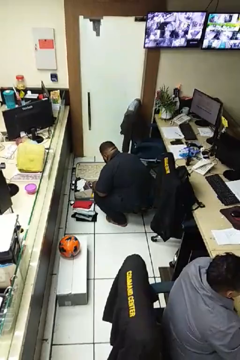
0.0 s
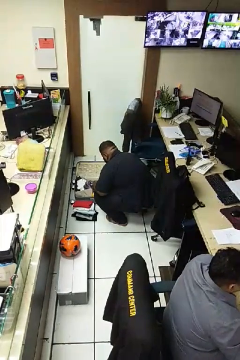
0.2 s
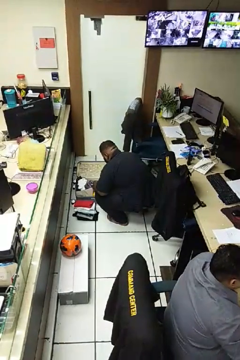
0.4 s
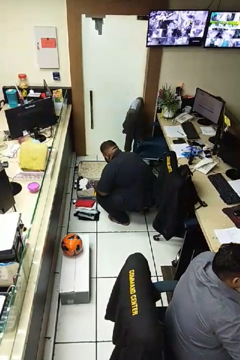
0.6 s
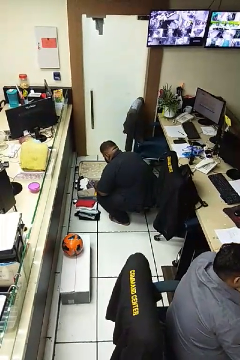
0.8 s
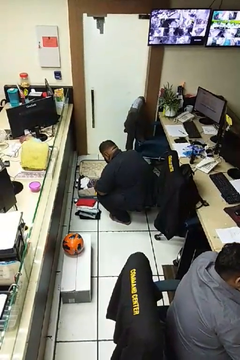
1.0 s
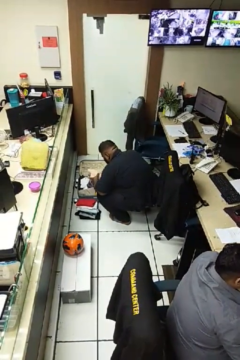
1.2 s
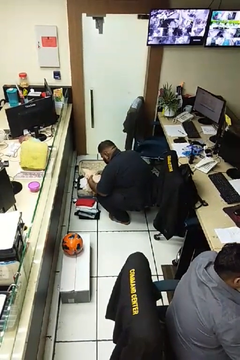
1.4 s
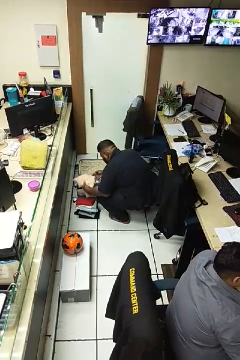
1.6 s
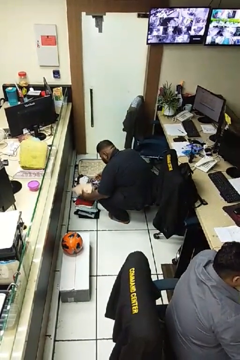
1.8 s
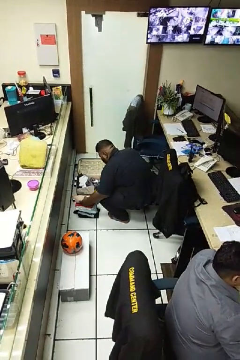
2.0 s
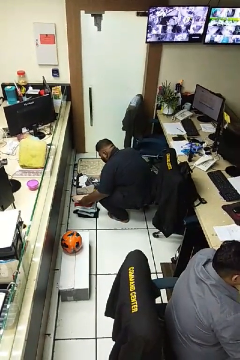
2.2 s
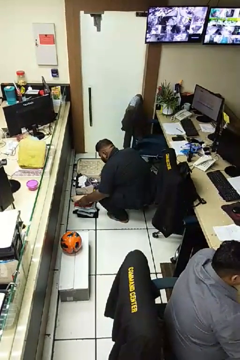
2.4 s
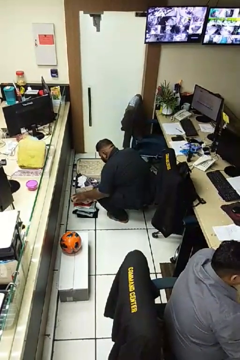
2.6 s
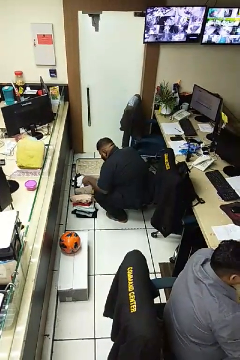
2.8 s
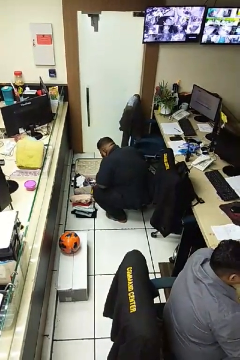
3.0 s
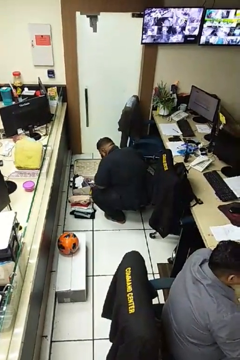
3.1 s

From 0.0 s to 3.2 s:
person unloads clothes from suitcase

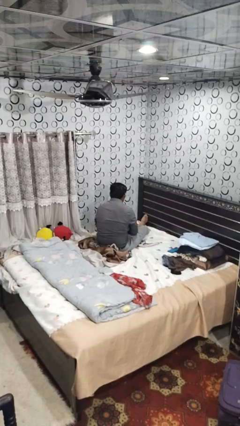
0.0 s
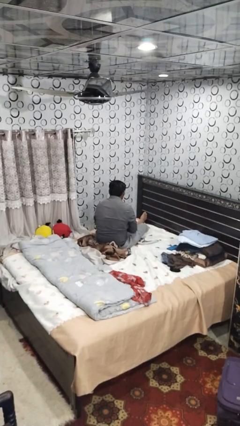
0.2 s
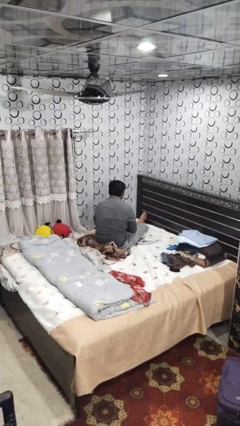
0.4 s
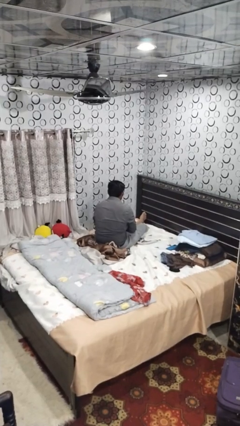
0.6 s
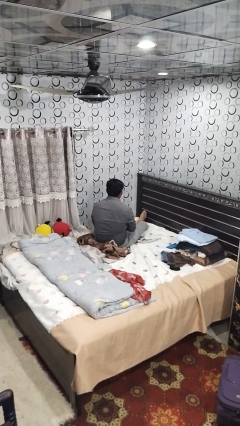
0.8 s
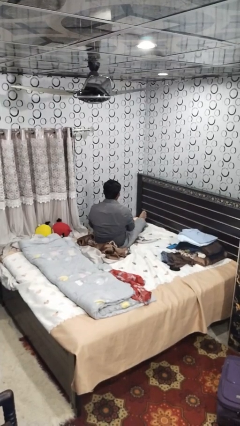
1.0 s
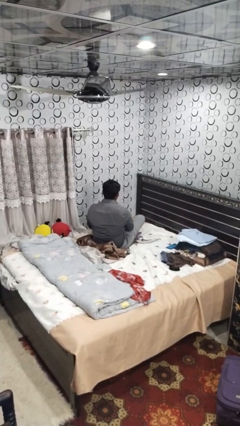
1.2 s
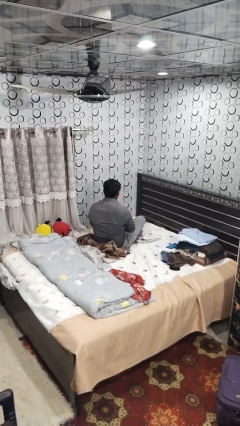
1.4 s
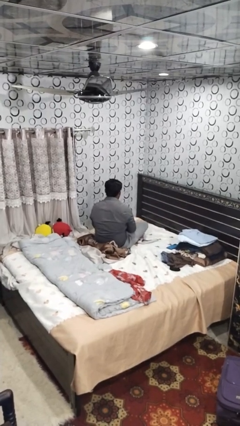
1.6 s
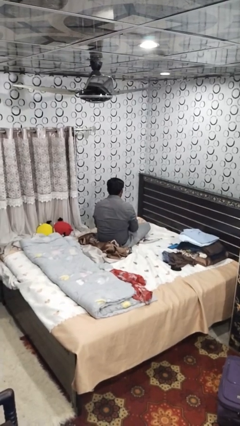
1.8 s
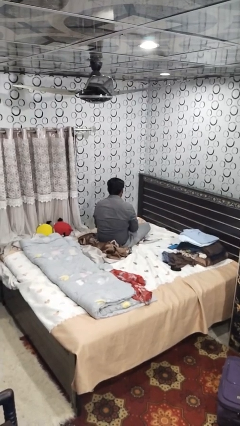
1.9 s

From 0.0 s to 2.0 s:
person crosses legs

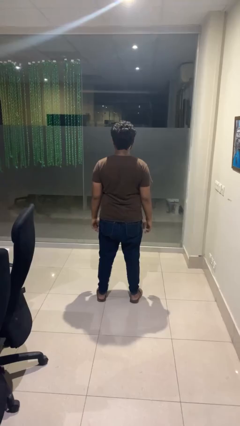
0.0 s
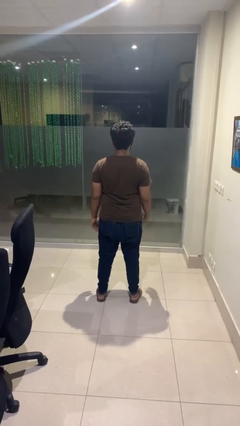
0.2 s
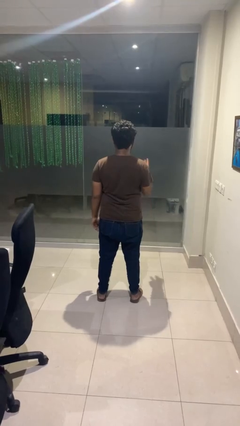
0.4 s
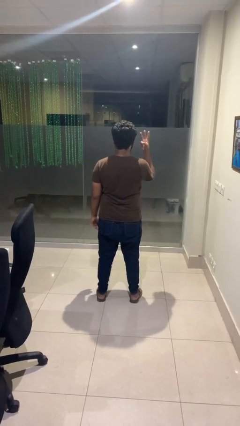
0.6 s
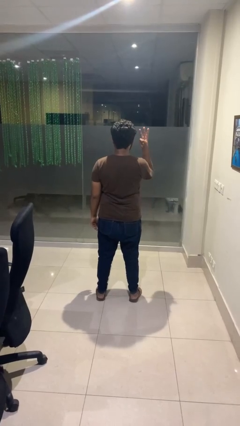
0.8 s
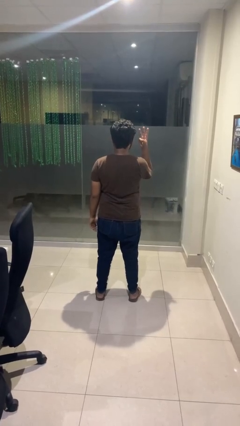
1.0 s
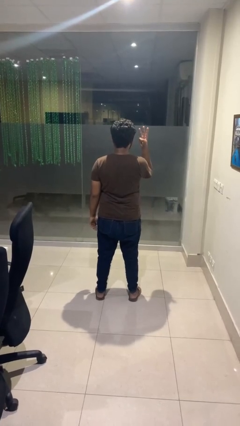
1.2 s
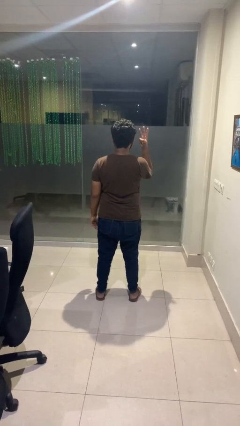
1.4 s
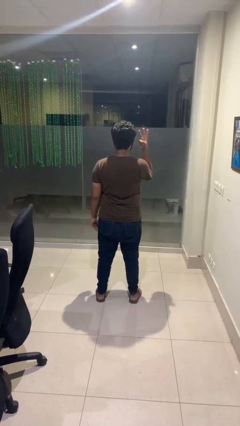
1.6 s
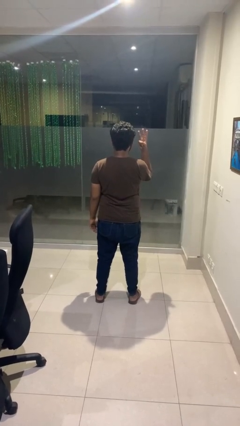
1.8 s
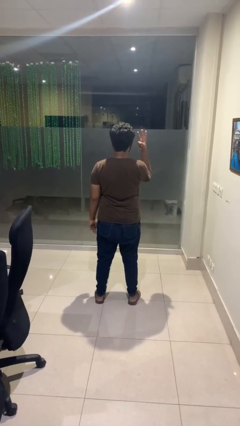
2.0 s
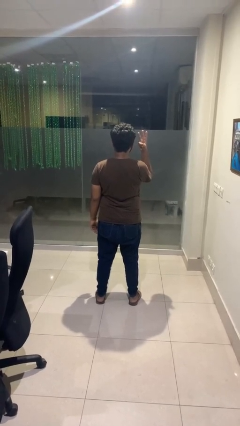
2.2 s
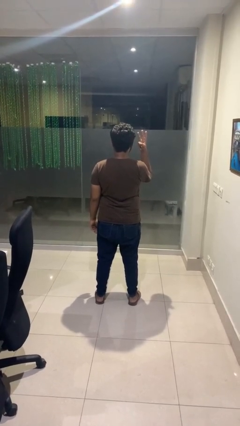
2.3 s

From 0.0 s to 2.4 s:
person gestures number three

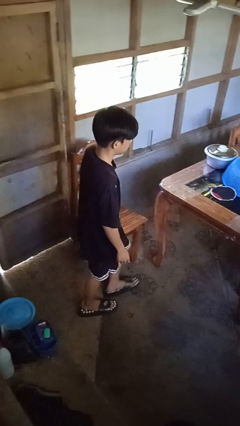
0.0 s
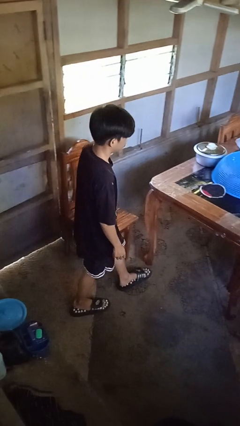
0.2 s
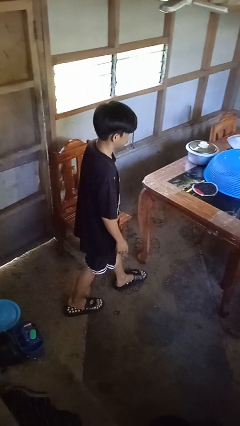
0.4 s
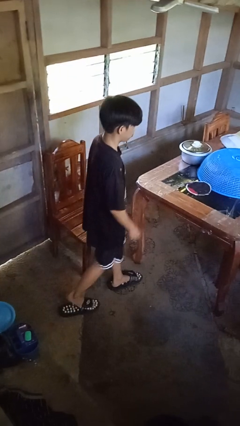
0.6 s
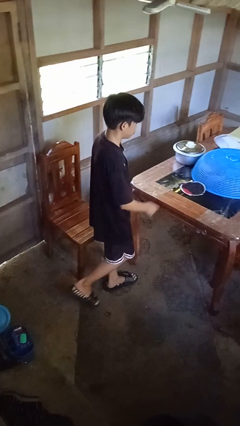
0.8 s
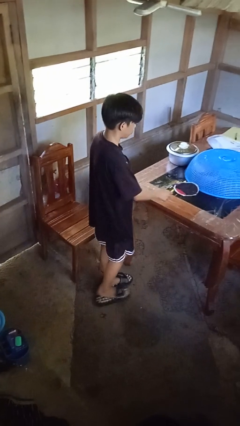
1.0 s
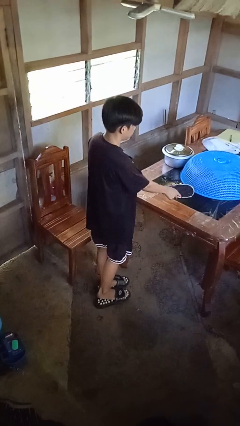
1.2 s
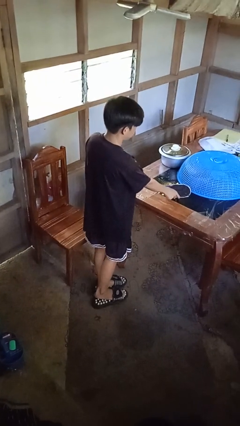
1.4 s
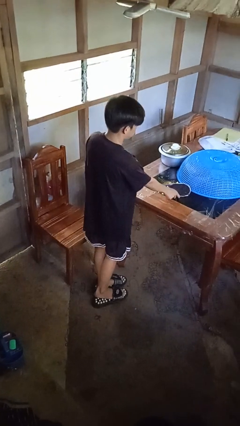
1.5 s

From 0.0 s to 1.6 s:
person picks up object from table

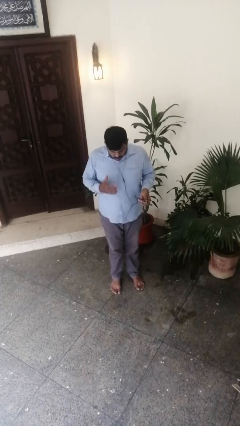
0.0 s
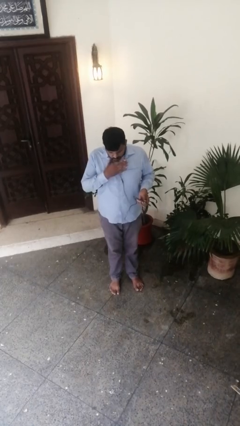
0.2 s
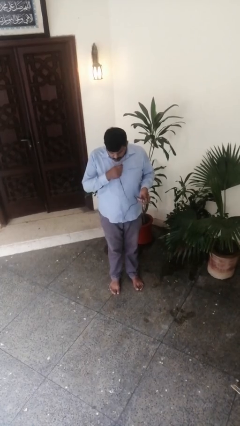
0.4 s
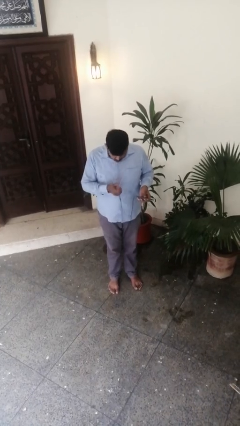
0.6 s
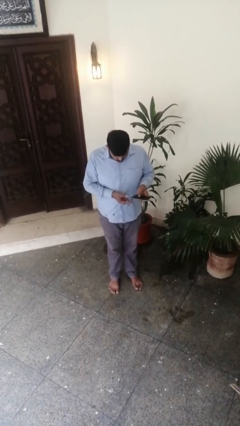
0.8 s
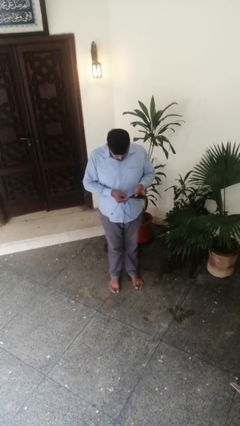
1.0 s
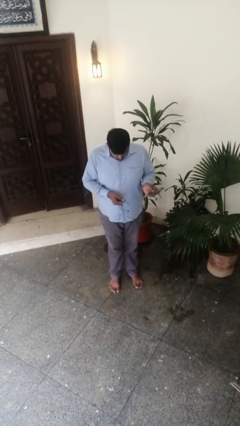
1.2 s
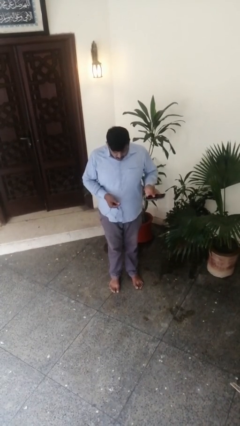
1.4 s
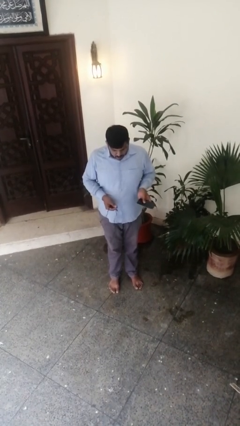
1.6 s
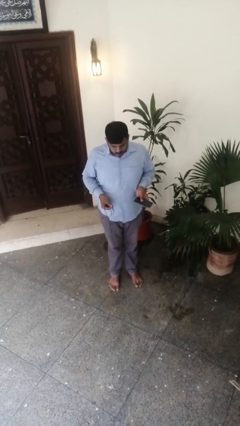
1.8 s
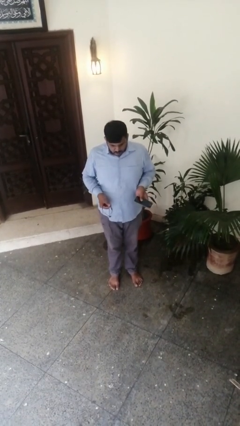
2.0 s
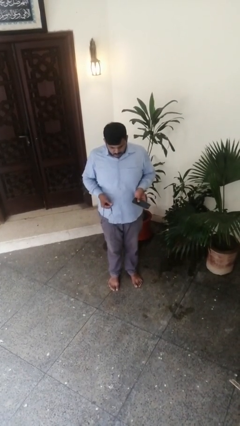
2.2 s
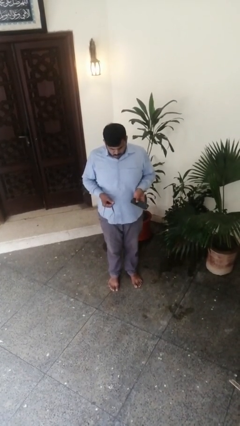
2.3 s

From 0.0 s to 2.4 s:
person takes off headphones

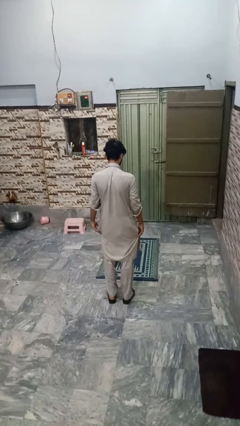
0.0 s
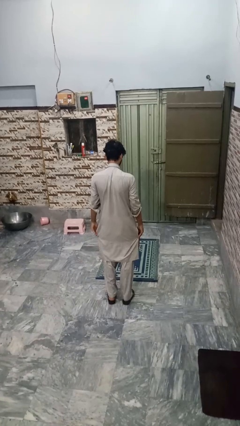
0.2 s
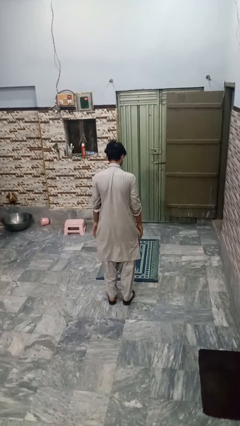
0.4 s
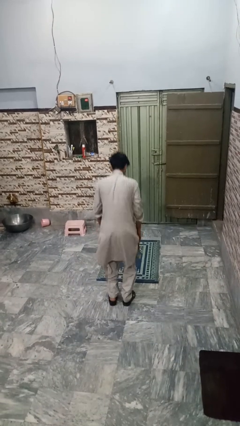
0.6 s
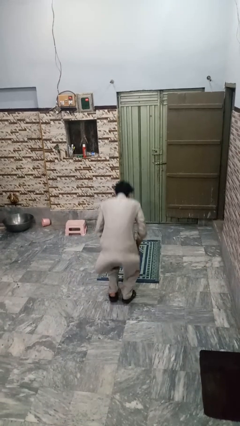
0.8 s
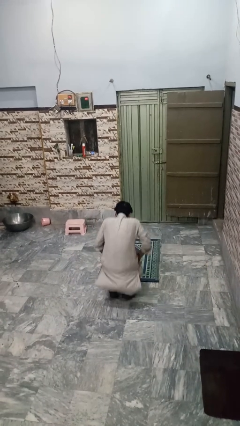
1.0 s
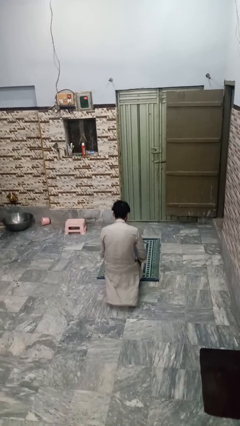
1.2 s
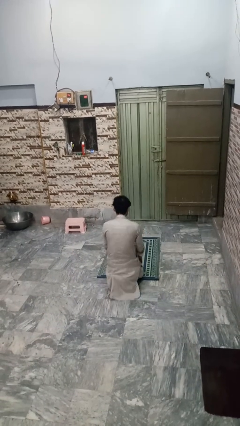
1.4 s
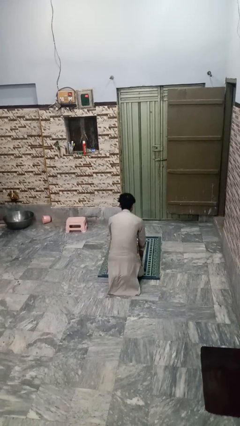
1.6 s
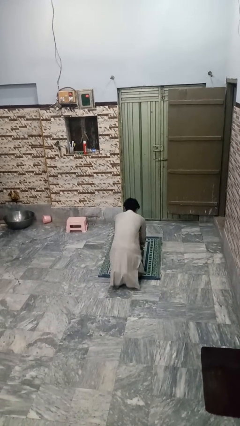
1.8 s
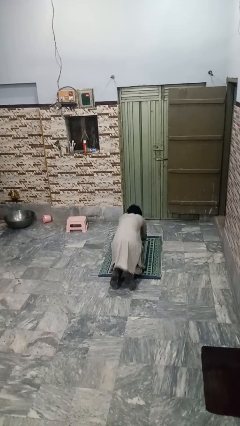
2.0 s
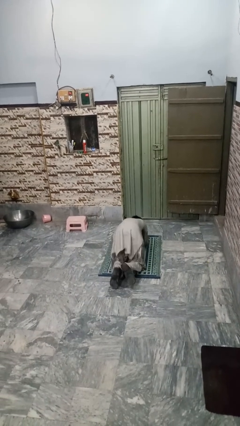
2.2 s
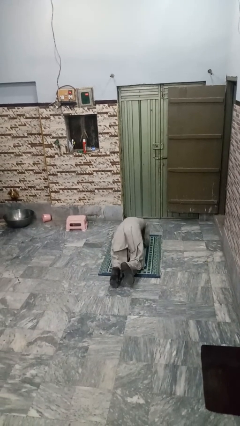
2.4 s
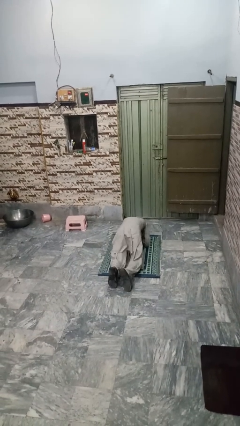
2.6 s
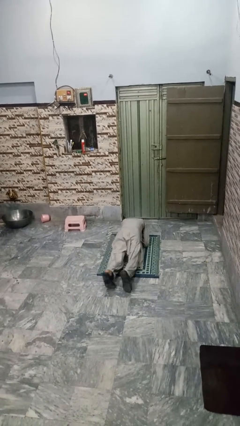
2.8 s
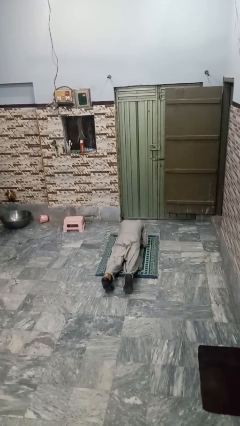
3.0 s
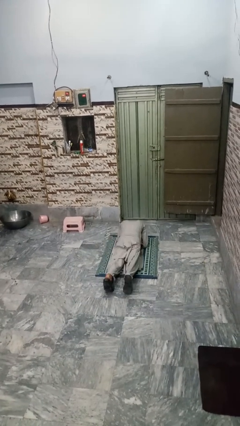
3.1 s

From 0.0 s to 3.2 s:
person exercises with plank

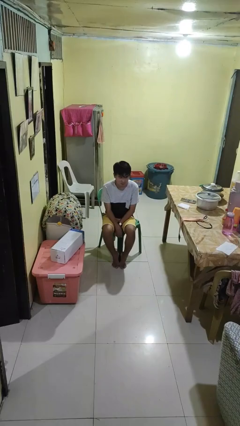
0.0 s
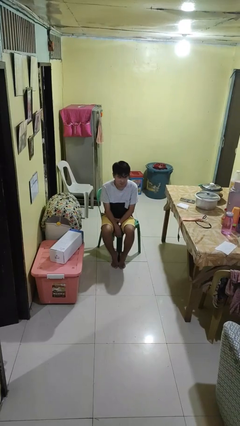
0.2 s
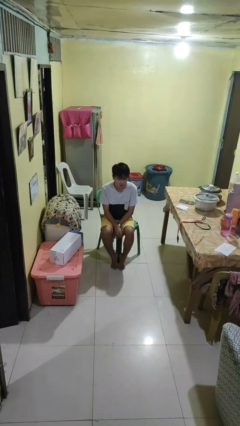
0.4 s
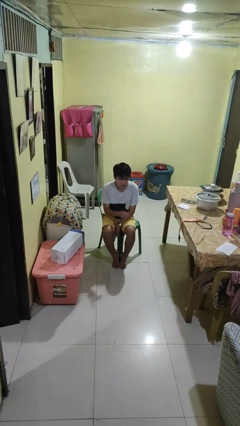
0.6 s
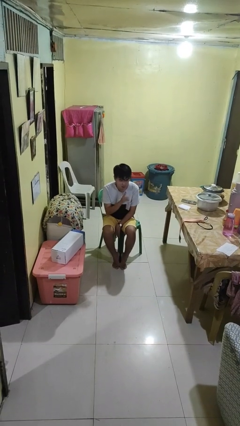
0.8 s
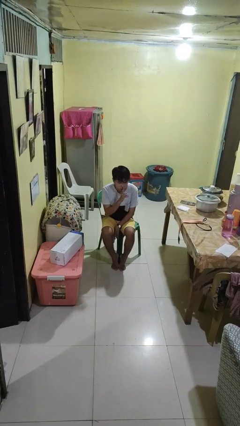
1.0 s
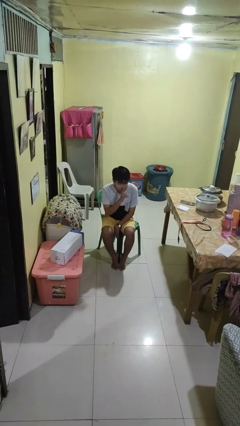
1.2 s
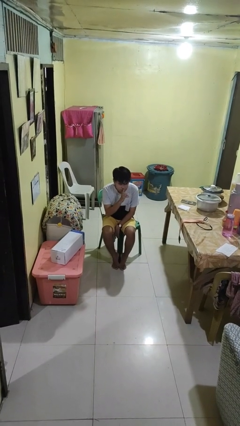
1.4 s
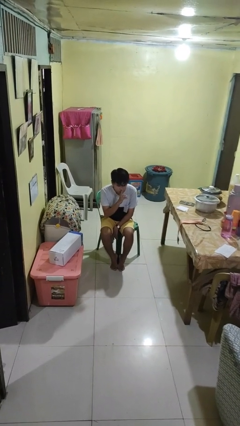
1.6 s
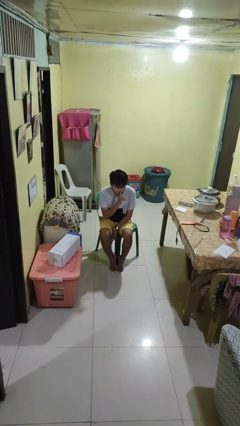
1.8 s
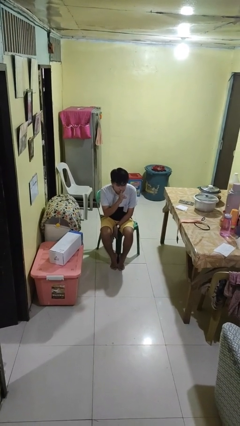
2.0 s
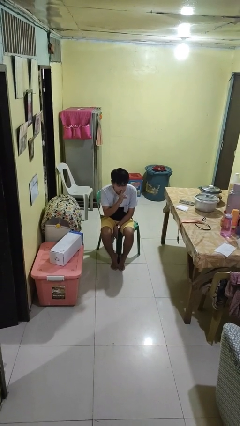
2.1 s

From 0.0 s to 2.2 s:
person gestures be quiet

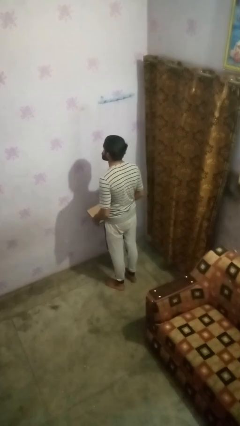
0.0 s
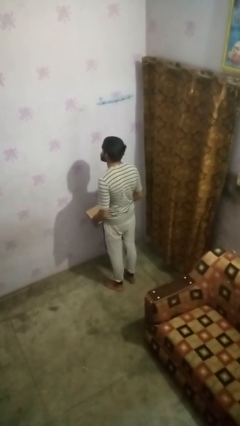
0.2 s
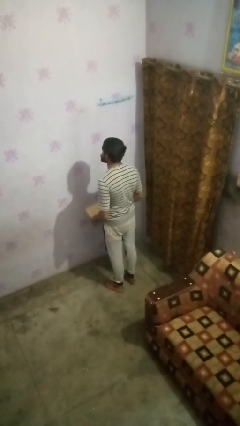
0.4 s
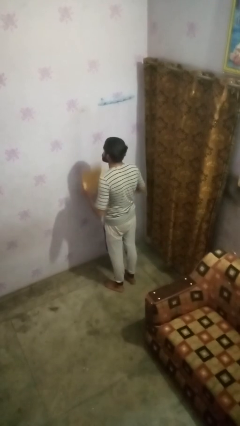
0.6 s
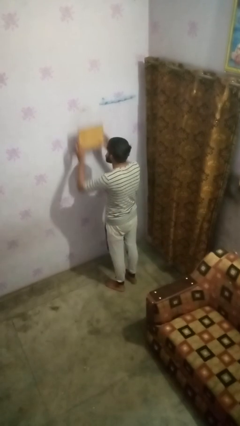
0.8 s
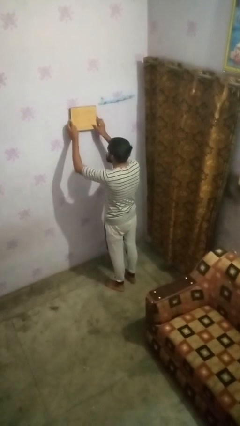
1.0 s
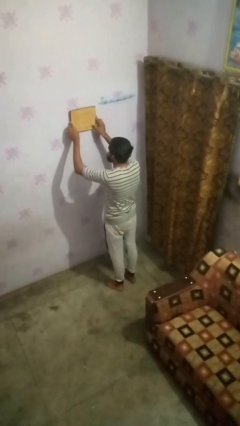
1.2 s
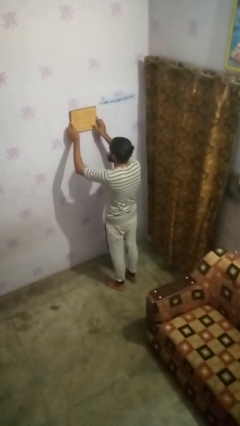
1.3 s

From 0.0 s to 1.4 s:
person puts up picture frame
